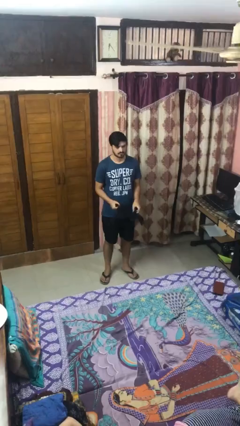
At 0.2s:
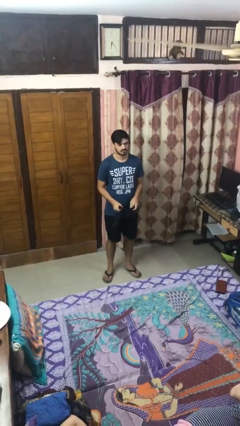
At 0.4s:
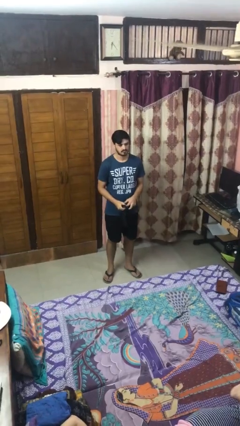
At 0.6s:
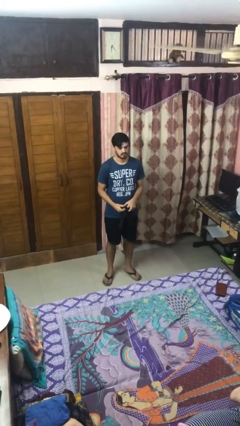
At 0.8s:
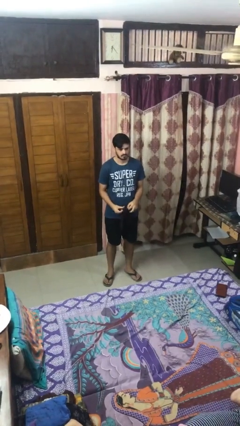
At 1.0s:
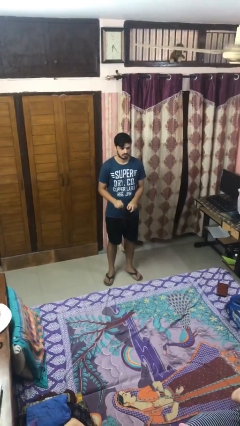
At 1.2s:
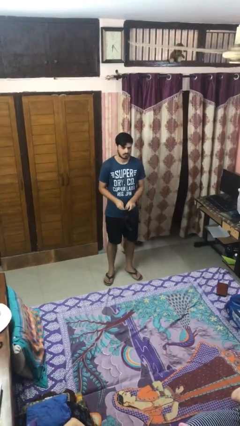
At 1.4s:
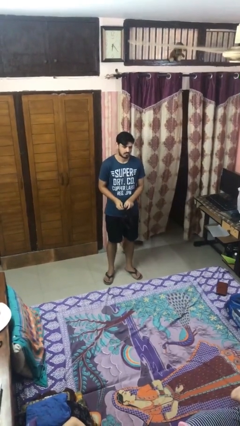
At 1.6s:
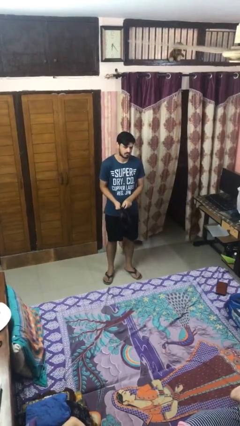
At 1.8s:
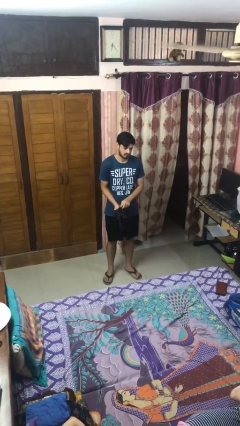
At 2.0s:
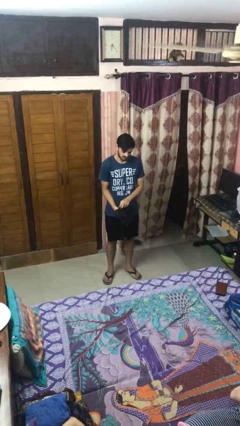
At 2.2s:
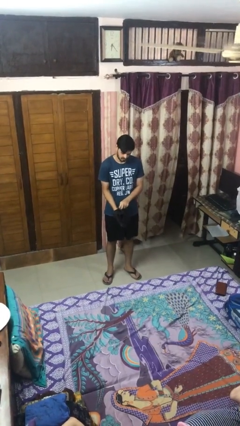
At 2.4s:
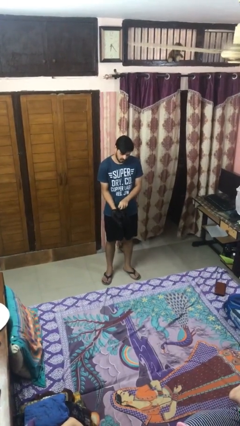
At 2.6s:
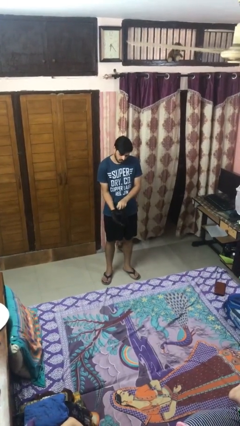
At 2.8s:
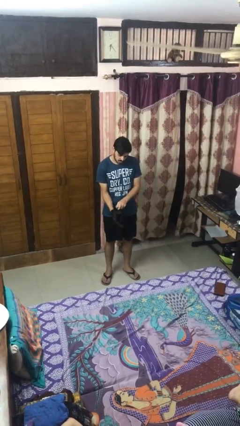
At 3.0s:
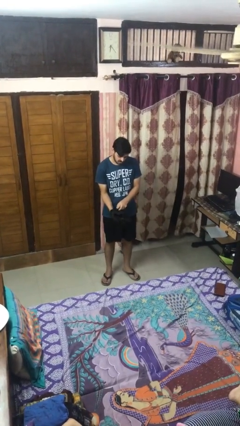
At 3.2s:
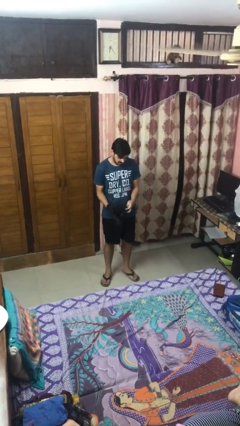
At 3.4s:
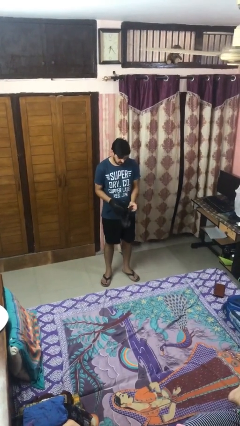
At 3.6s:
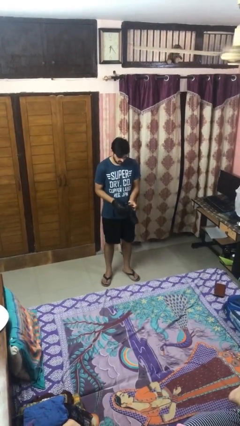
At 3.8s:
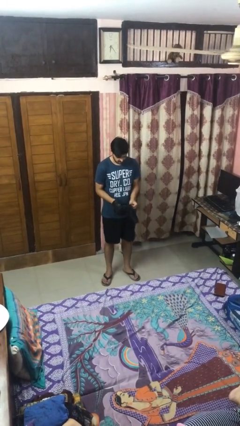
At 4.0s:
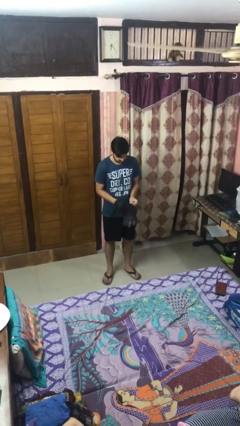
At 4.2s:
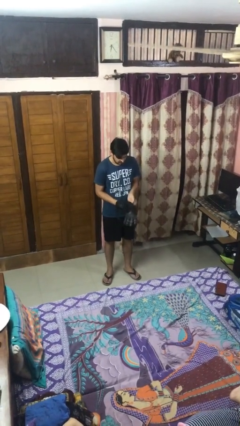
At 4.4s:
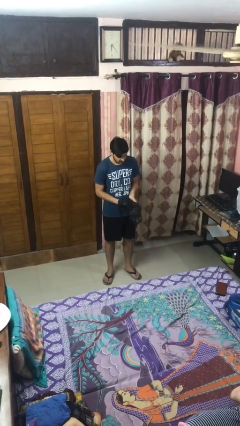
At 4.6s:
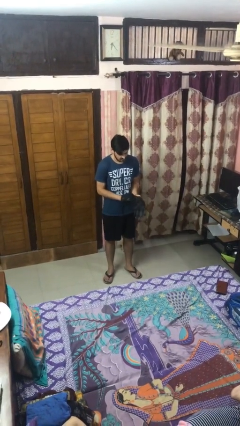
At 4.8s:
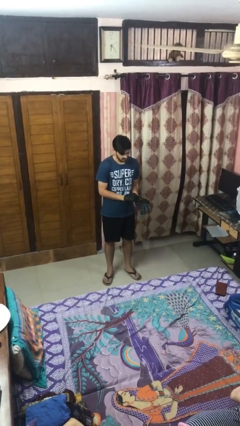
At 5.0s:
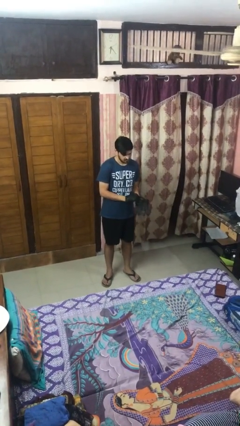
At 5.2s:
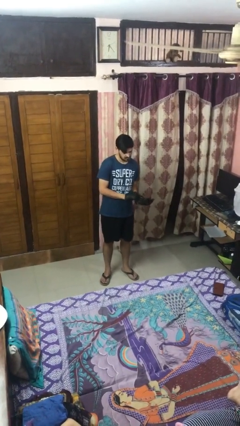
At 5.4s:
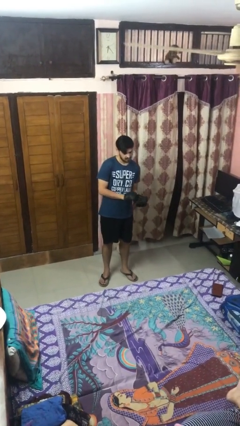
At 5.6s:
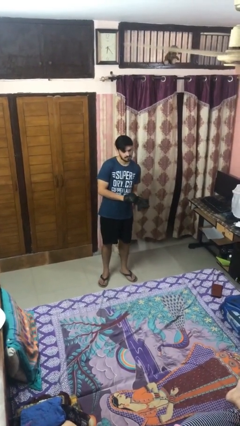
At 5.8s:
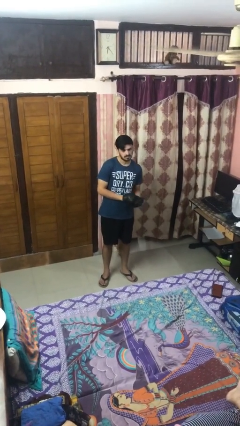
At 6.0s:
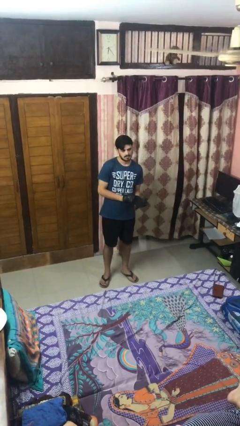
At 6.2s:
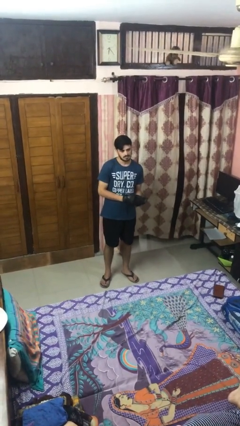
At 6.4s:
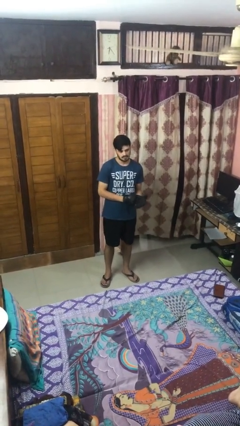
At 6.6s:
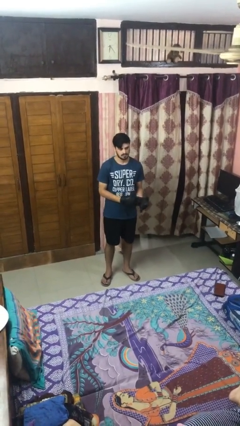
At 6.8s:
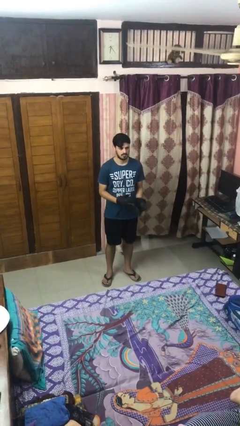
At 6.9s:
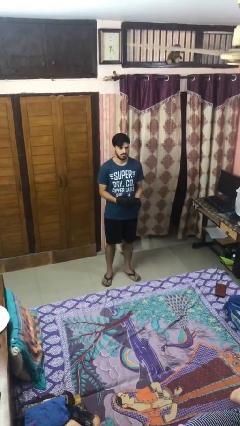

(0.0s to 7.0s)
person puts on gloves

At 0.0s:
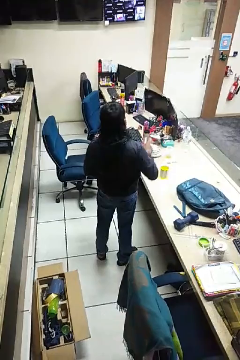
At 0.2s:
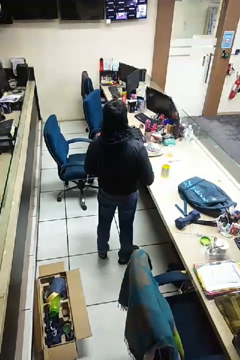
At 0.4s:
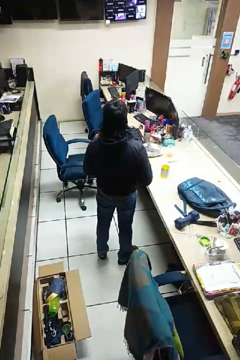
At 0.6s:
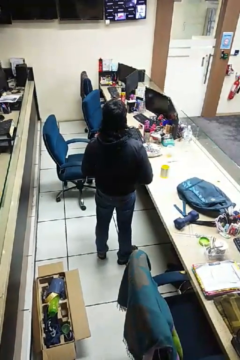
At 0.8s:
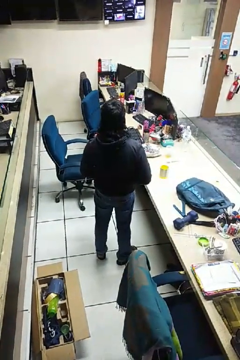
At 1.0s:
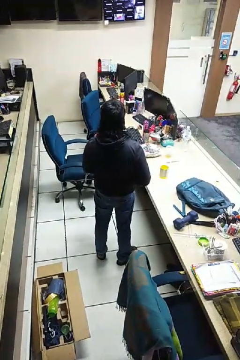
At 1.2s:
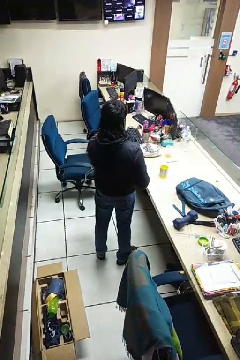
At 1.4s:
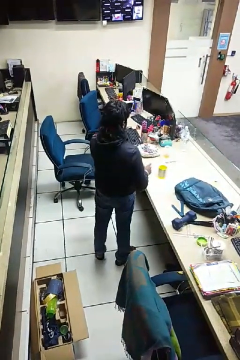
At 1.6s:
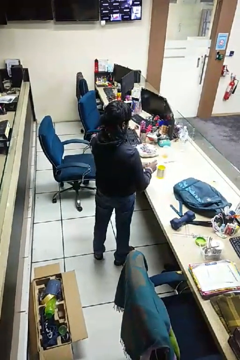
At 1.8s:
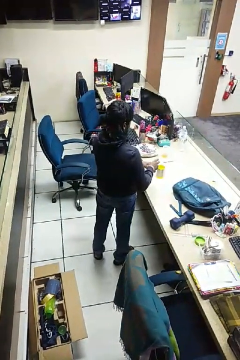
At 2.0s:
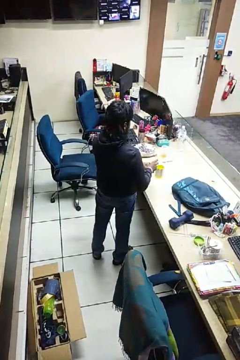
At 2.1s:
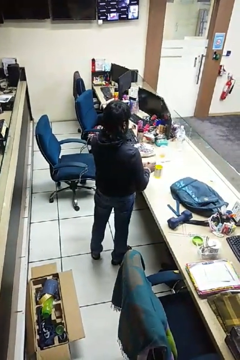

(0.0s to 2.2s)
person opens beverage can

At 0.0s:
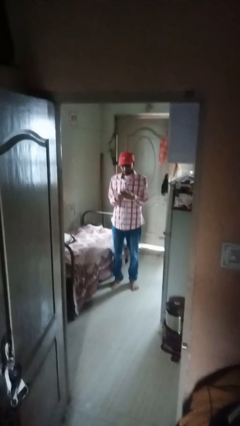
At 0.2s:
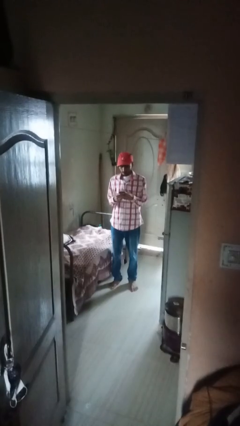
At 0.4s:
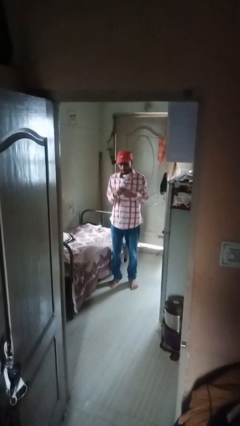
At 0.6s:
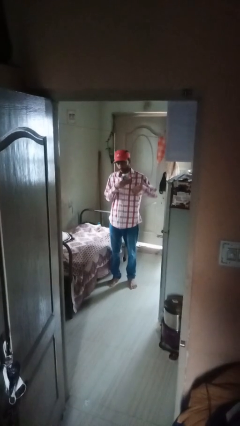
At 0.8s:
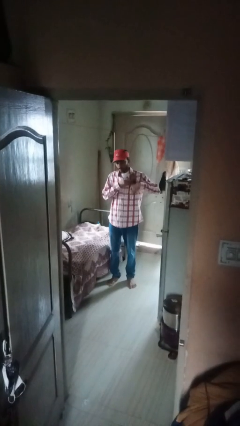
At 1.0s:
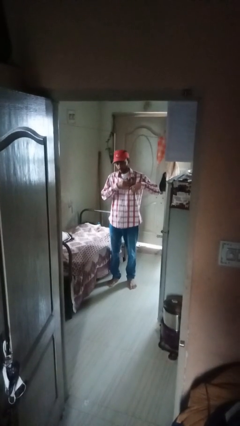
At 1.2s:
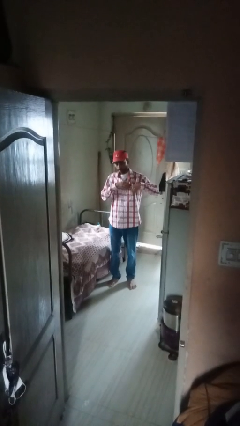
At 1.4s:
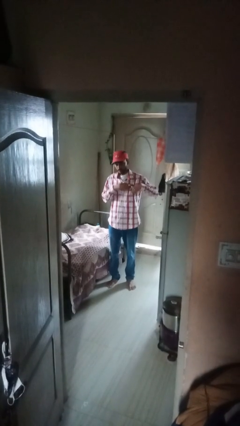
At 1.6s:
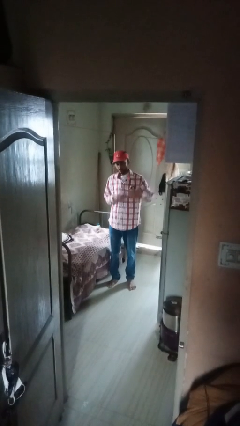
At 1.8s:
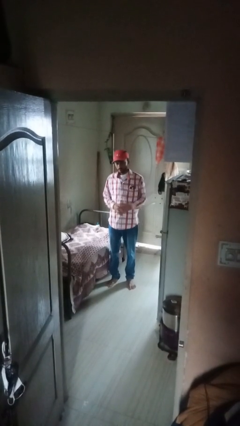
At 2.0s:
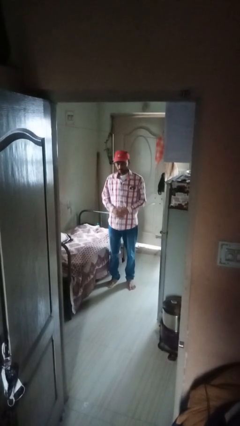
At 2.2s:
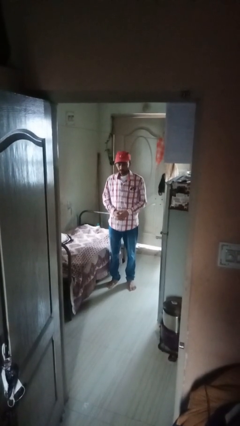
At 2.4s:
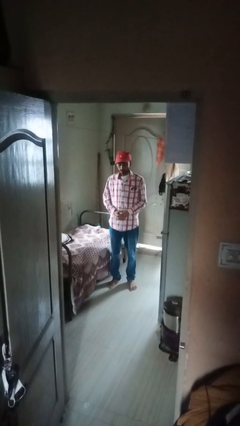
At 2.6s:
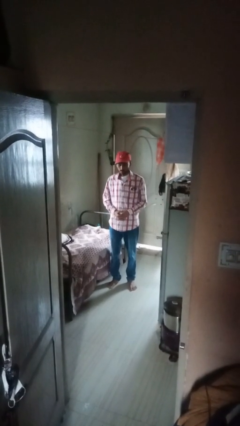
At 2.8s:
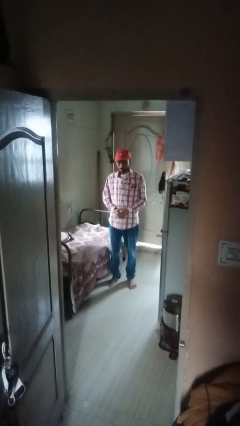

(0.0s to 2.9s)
person puts phone into pocket

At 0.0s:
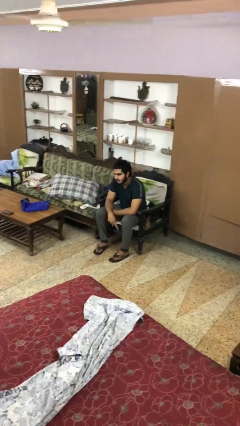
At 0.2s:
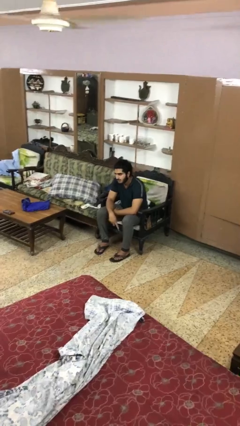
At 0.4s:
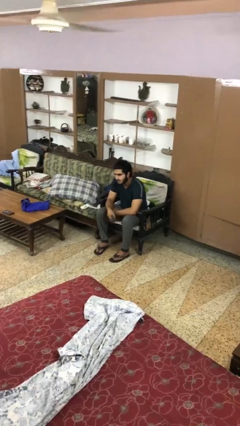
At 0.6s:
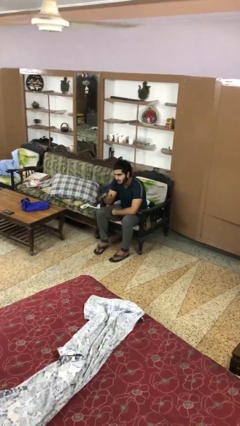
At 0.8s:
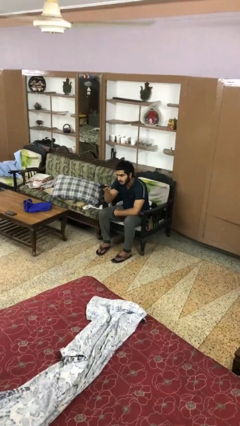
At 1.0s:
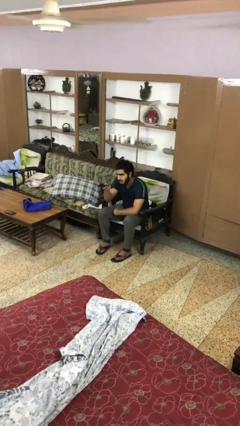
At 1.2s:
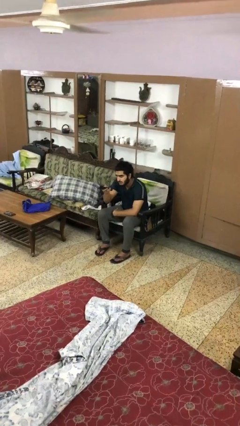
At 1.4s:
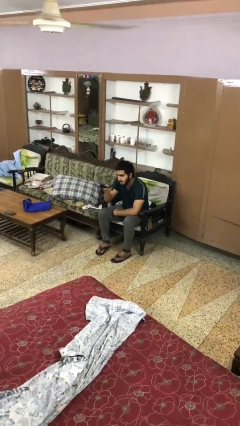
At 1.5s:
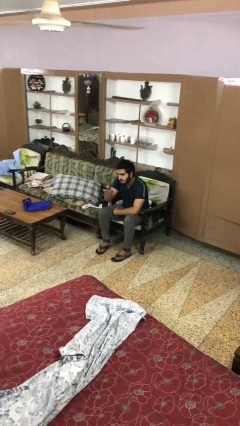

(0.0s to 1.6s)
person uses television remote

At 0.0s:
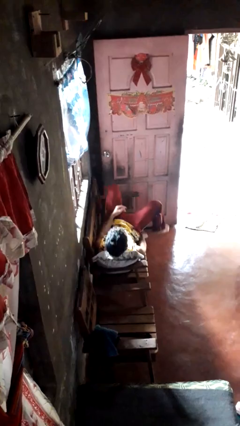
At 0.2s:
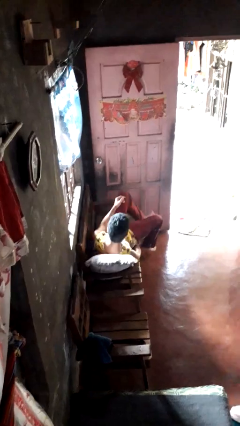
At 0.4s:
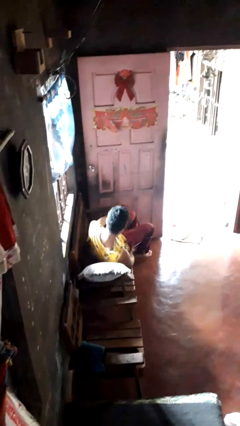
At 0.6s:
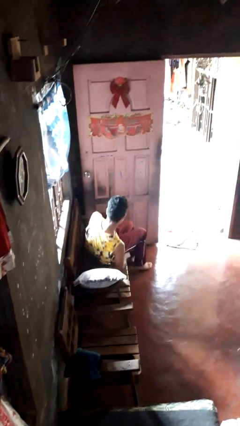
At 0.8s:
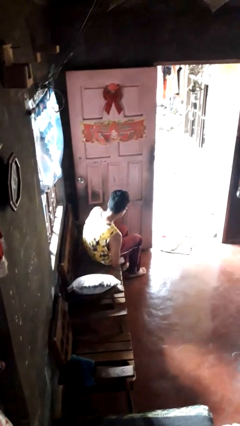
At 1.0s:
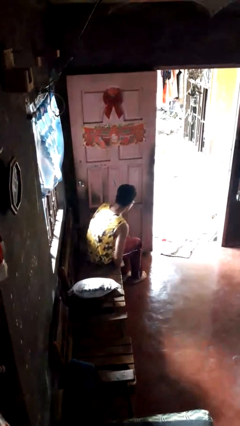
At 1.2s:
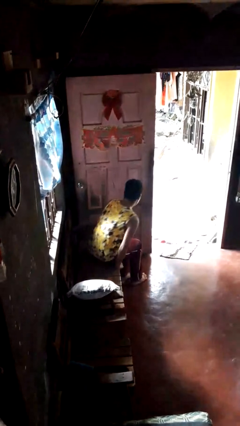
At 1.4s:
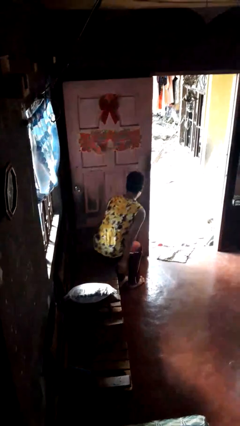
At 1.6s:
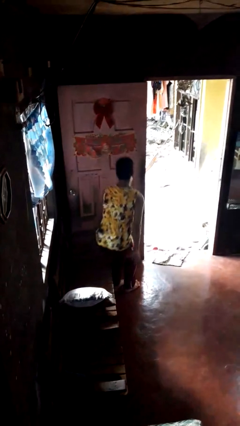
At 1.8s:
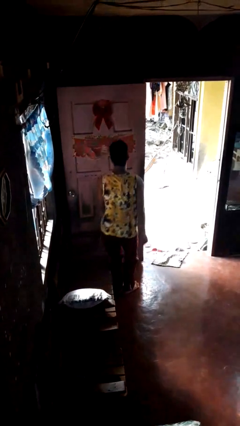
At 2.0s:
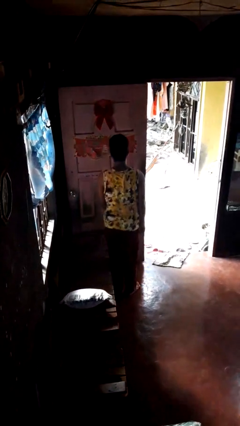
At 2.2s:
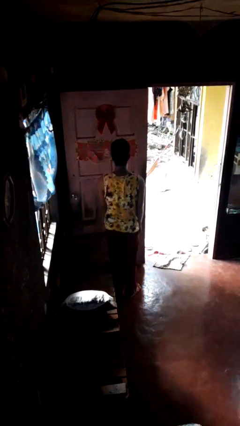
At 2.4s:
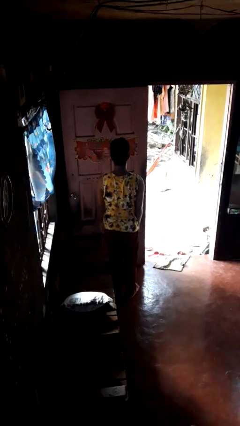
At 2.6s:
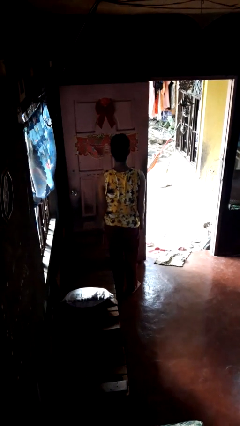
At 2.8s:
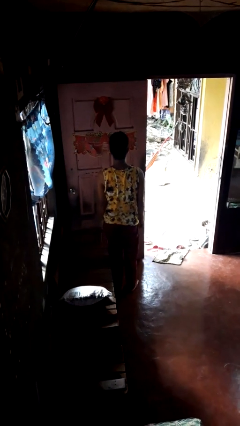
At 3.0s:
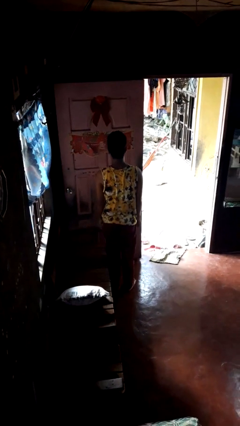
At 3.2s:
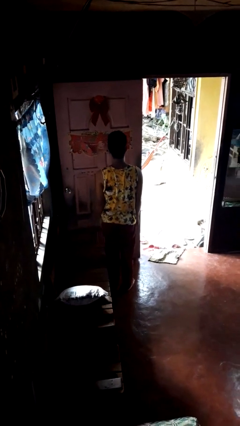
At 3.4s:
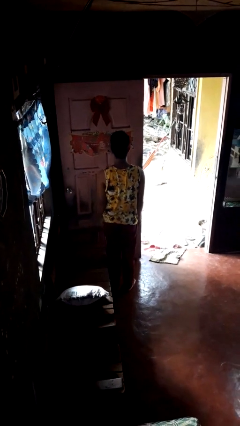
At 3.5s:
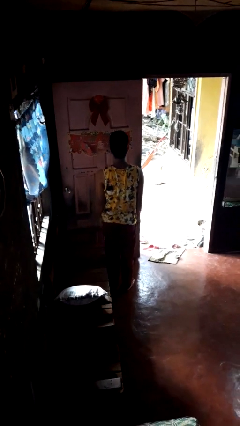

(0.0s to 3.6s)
person stands up

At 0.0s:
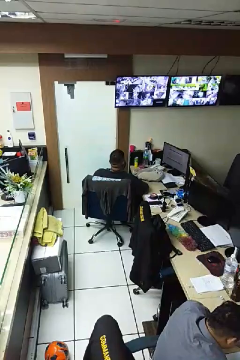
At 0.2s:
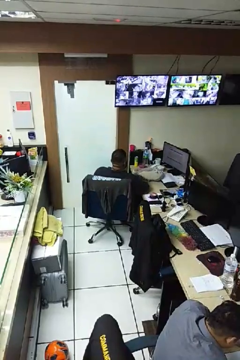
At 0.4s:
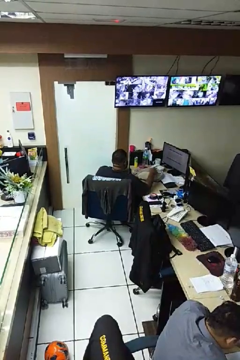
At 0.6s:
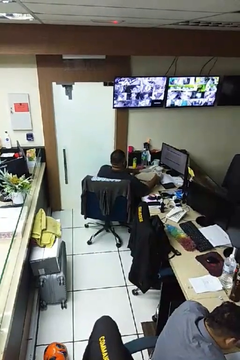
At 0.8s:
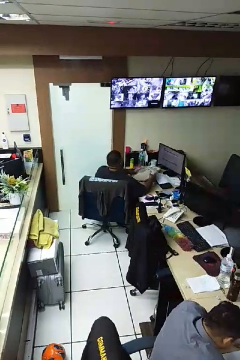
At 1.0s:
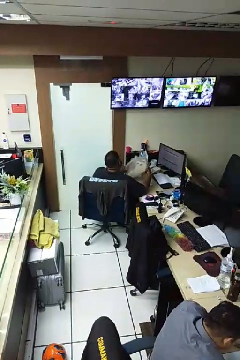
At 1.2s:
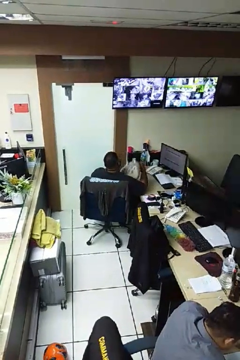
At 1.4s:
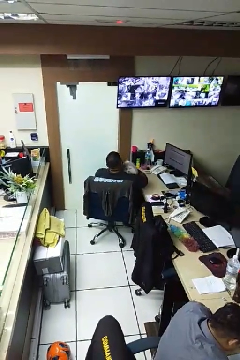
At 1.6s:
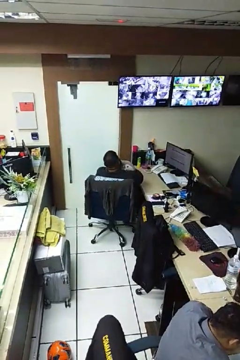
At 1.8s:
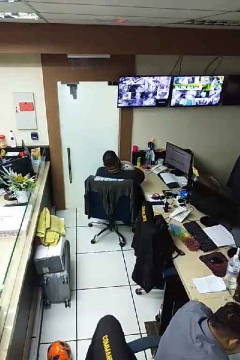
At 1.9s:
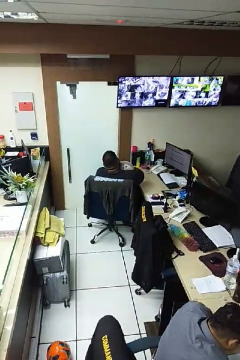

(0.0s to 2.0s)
person hugs stuffed animal
